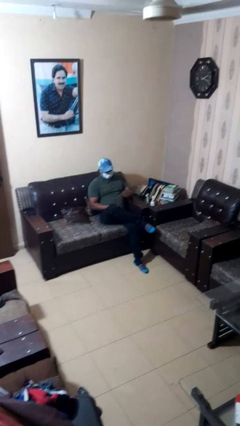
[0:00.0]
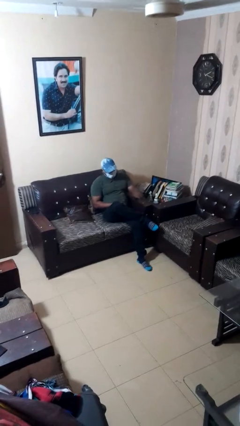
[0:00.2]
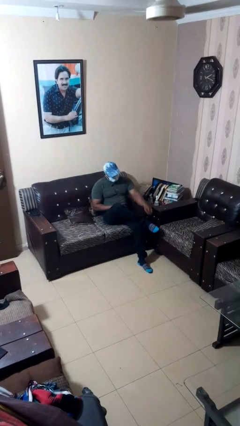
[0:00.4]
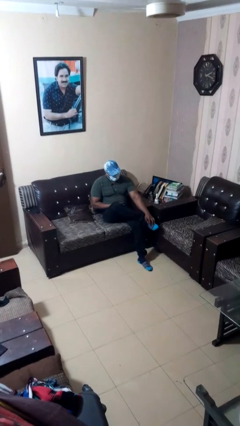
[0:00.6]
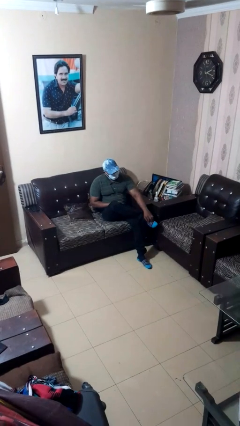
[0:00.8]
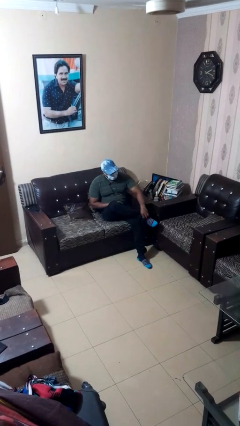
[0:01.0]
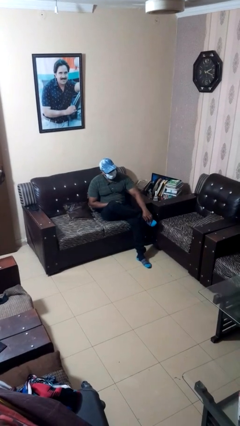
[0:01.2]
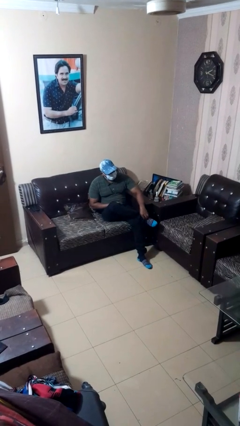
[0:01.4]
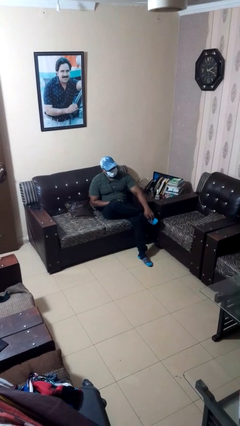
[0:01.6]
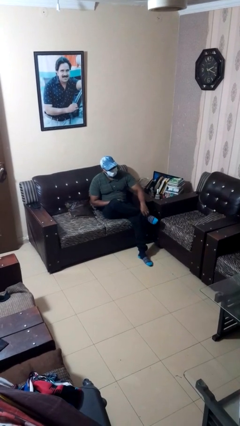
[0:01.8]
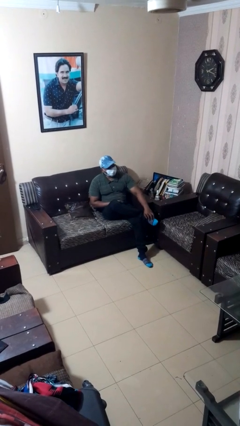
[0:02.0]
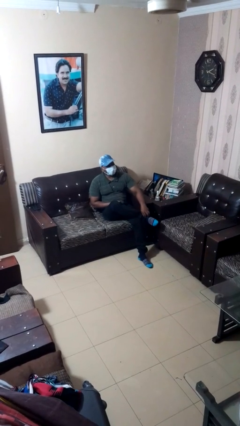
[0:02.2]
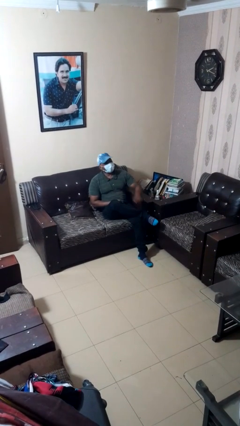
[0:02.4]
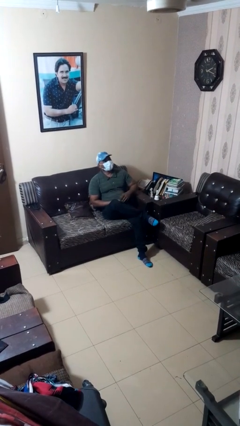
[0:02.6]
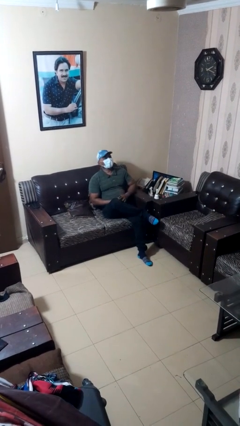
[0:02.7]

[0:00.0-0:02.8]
person rubs foot

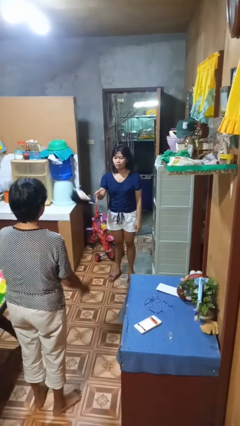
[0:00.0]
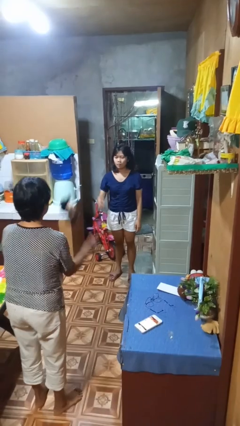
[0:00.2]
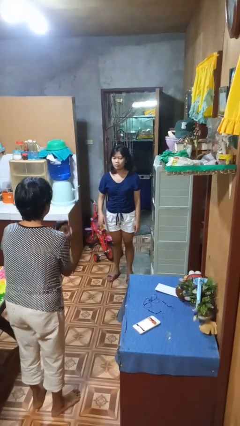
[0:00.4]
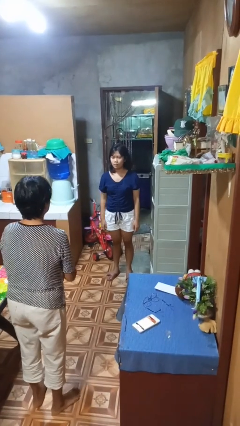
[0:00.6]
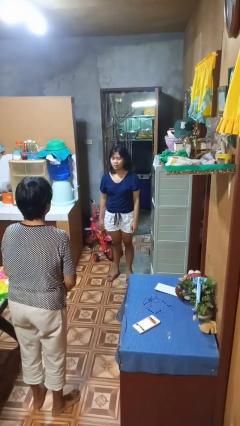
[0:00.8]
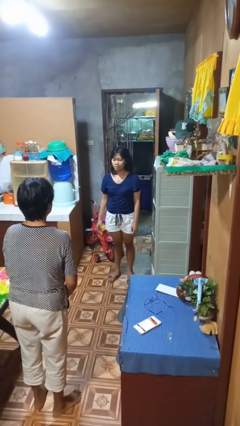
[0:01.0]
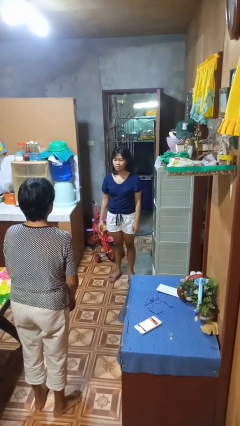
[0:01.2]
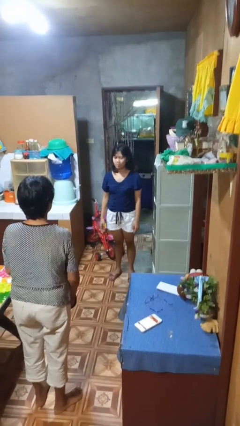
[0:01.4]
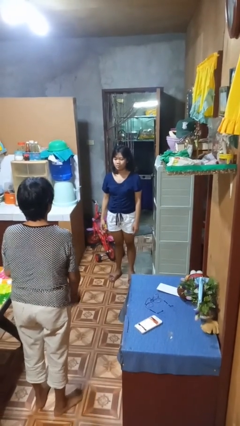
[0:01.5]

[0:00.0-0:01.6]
person throws object to person

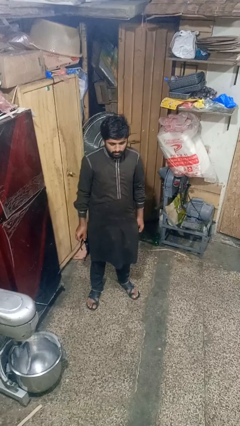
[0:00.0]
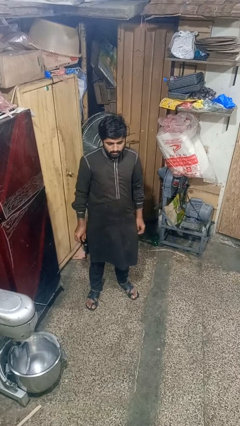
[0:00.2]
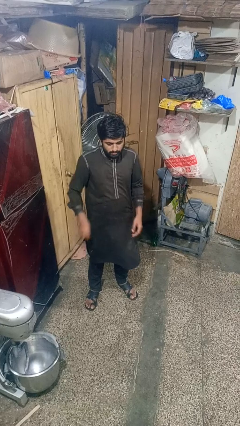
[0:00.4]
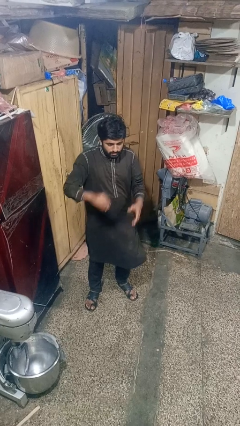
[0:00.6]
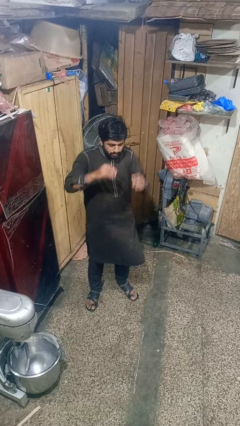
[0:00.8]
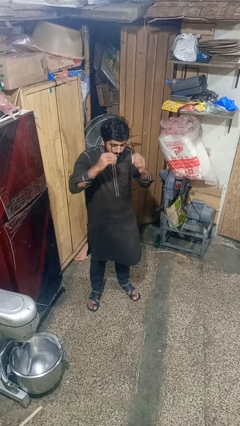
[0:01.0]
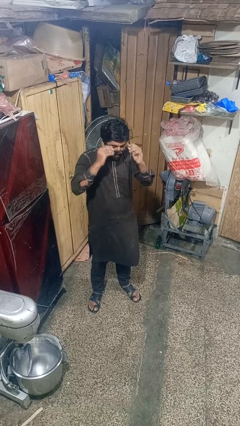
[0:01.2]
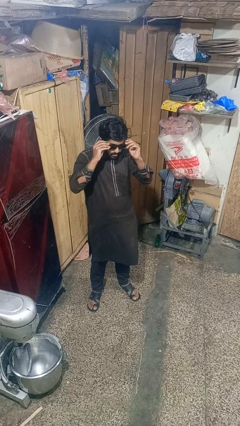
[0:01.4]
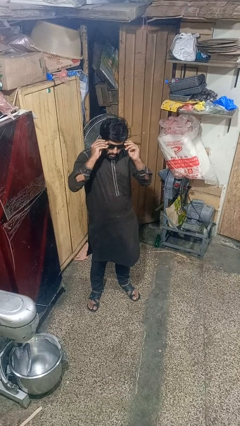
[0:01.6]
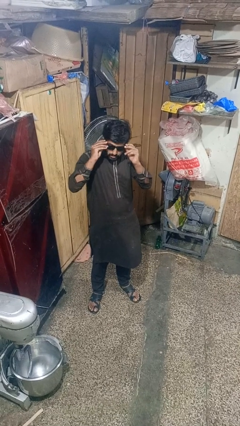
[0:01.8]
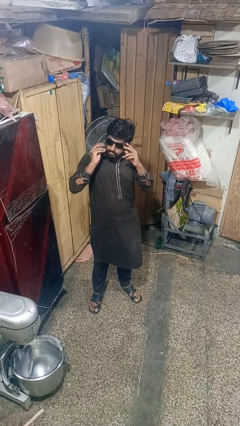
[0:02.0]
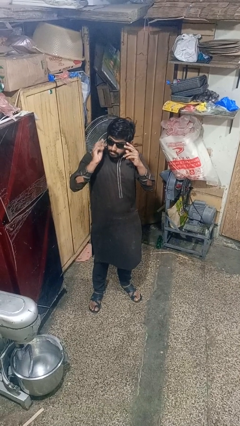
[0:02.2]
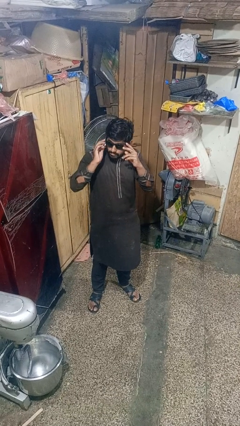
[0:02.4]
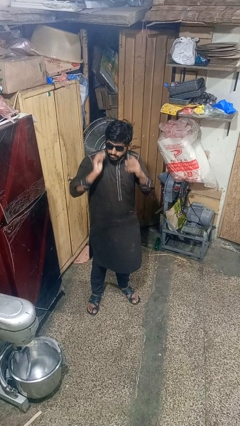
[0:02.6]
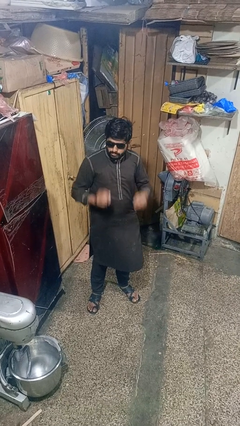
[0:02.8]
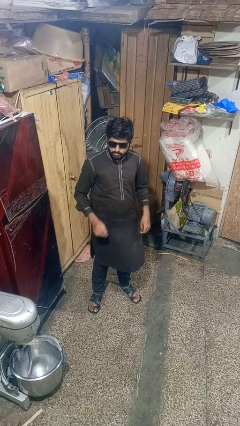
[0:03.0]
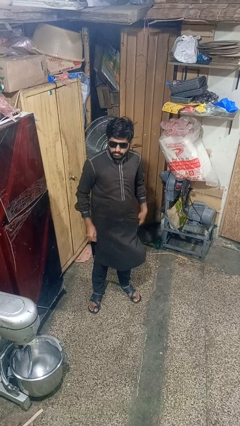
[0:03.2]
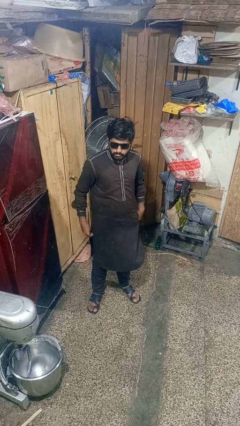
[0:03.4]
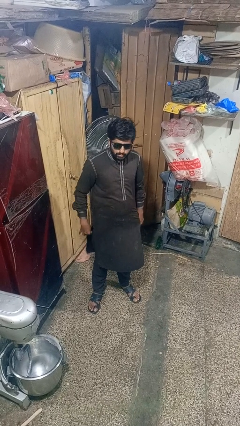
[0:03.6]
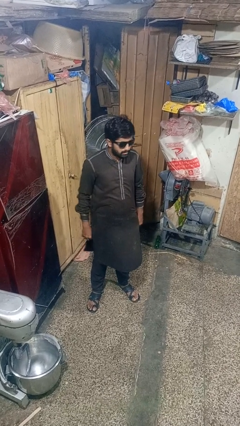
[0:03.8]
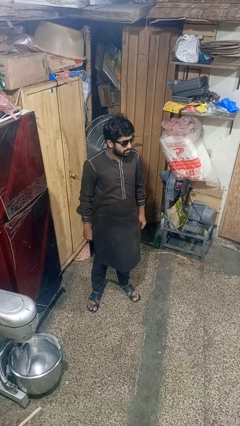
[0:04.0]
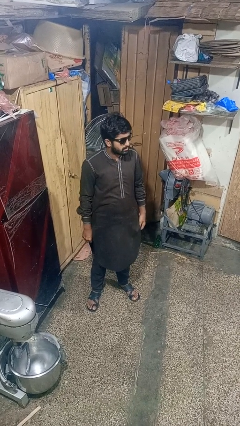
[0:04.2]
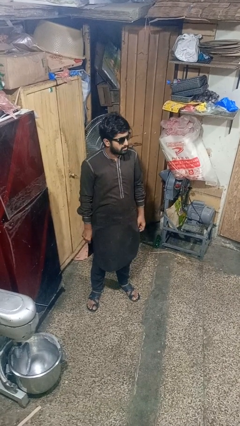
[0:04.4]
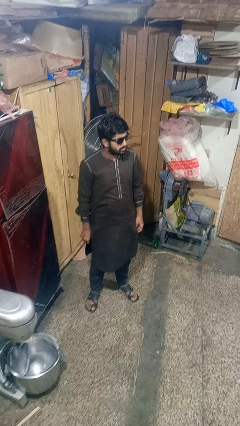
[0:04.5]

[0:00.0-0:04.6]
person puts on sunglasses

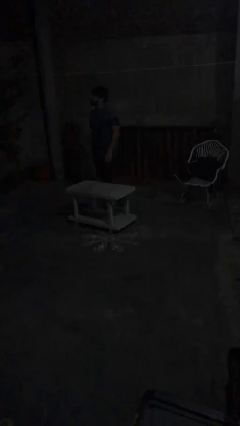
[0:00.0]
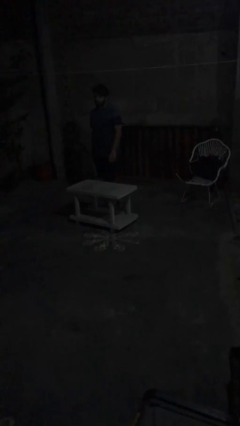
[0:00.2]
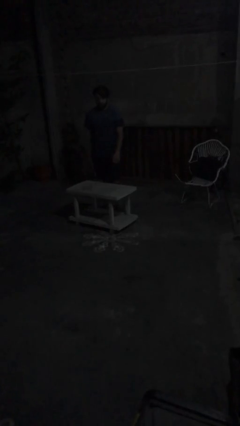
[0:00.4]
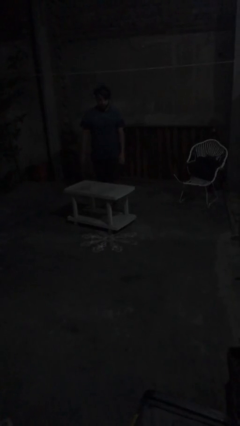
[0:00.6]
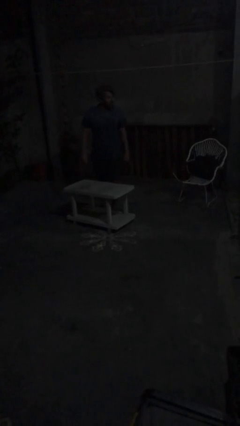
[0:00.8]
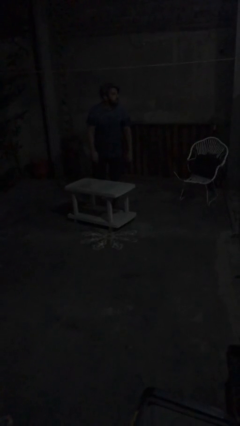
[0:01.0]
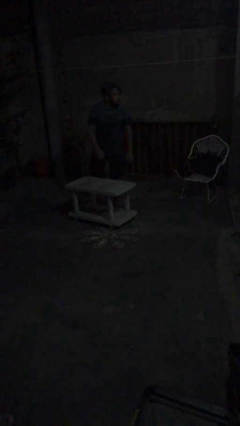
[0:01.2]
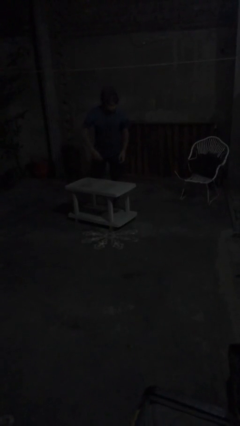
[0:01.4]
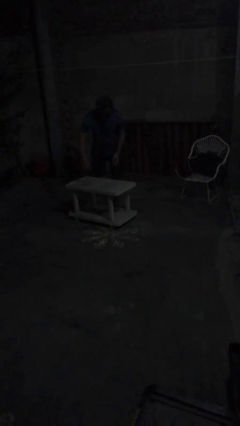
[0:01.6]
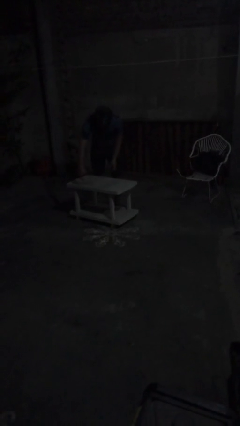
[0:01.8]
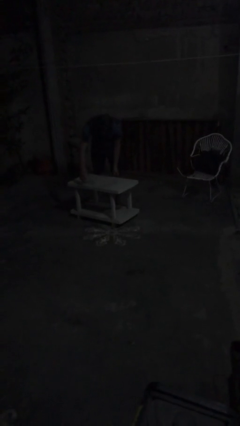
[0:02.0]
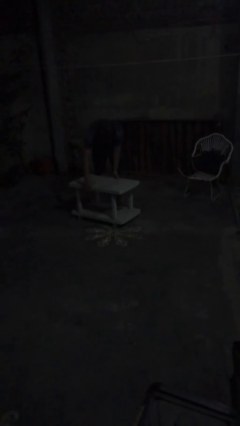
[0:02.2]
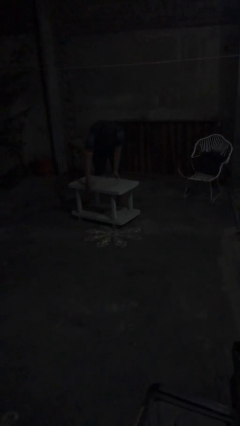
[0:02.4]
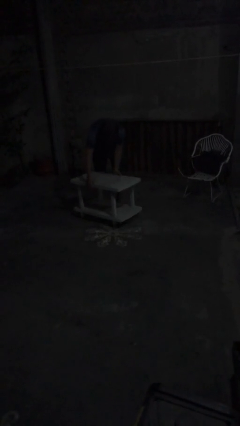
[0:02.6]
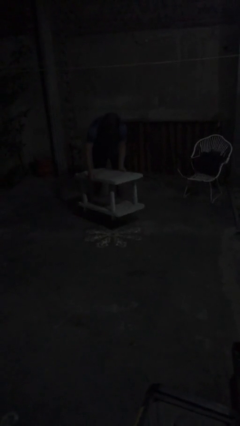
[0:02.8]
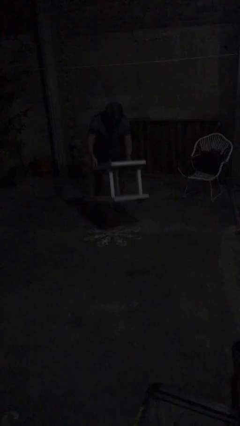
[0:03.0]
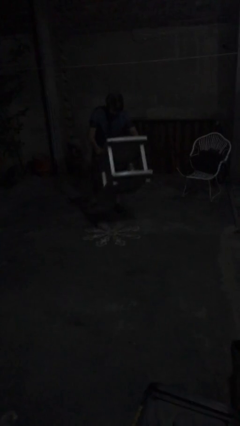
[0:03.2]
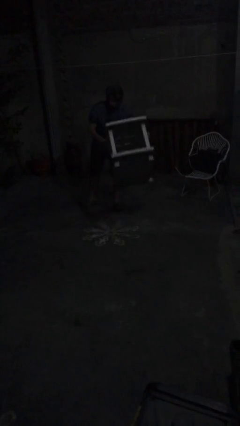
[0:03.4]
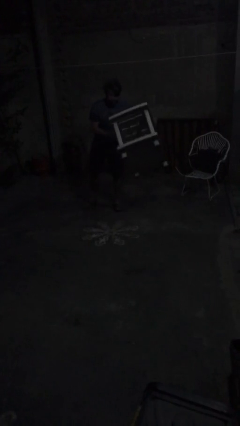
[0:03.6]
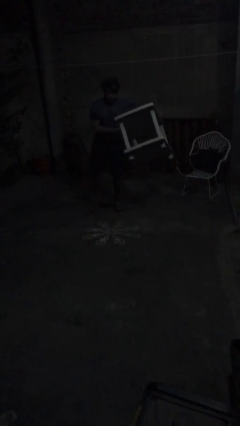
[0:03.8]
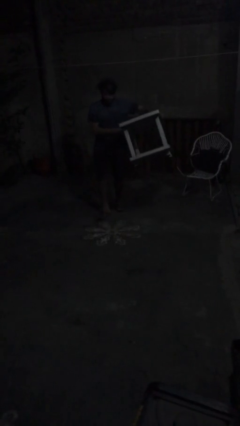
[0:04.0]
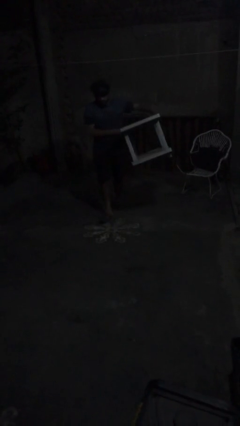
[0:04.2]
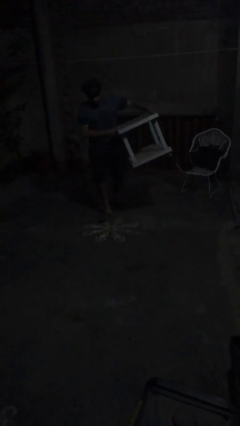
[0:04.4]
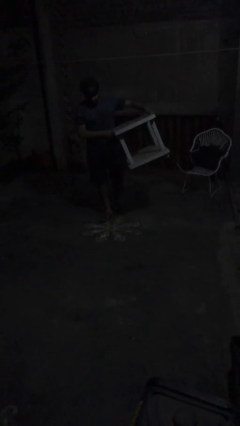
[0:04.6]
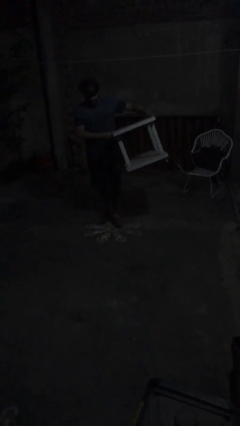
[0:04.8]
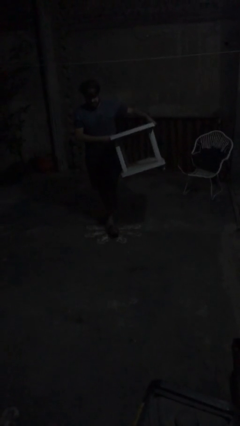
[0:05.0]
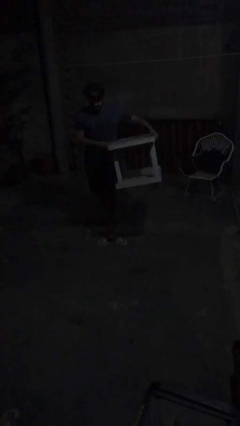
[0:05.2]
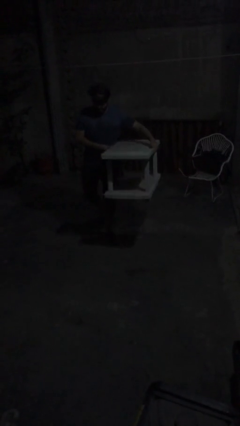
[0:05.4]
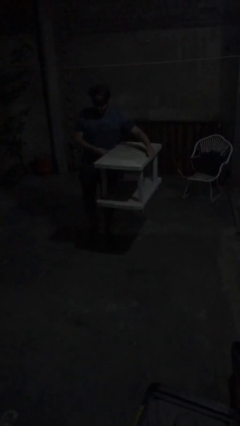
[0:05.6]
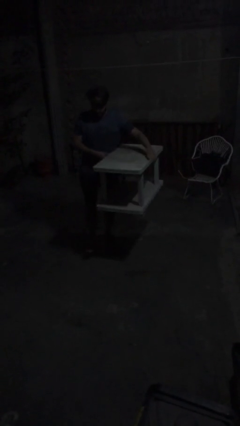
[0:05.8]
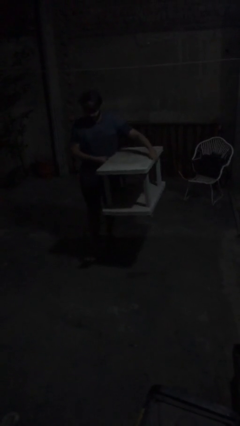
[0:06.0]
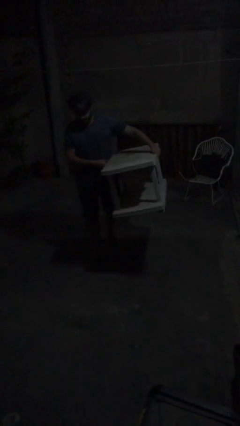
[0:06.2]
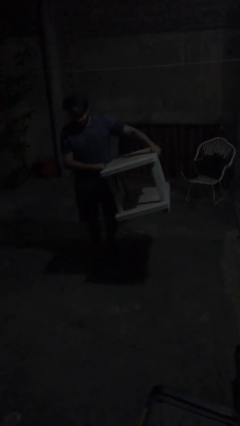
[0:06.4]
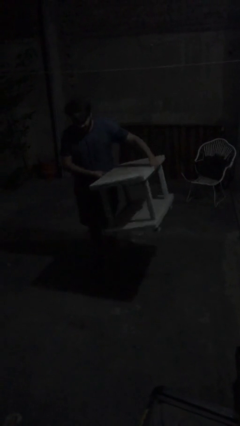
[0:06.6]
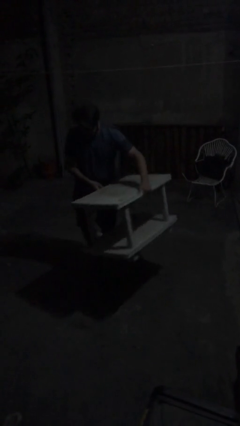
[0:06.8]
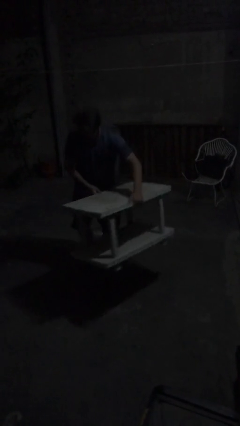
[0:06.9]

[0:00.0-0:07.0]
person carries heavy object

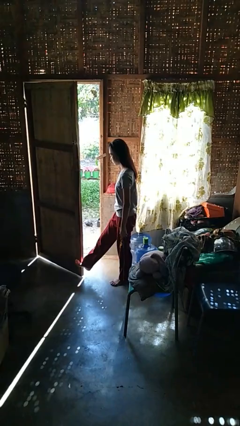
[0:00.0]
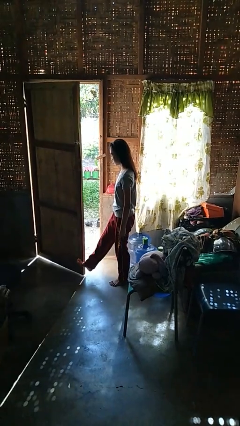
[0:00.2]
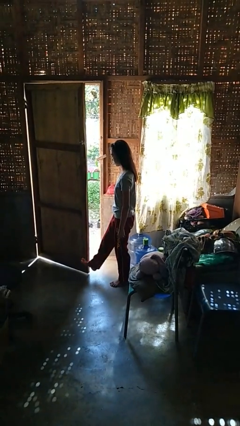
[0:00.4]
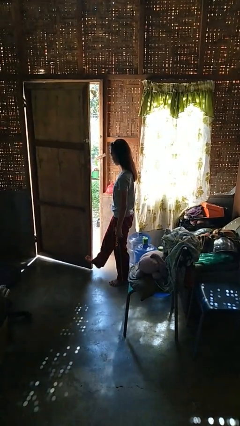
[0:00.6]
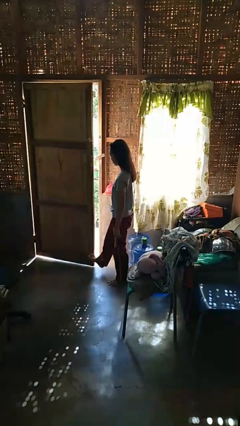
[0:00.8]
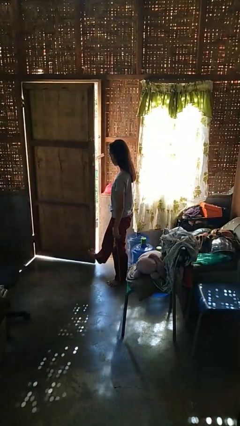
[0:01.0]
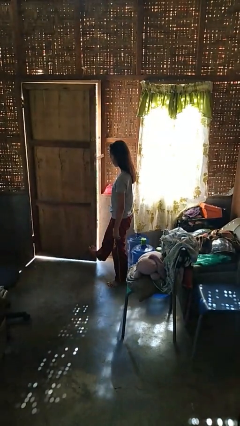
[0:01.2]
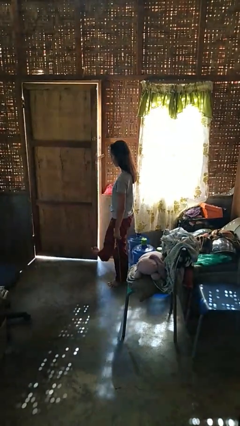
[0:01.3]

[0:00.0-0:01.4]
person closes door with foot
